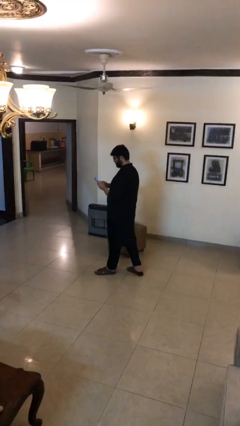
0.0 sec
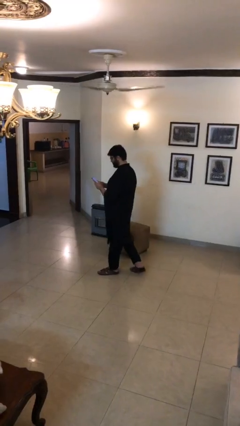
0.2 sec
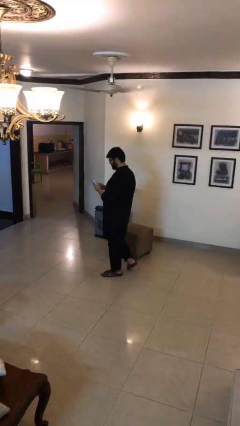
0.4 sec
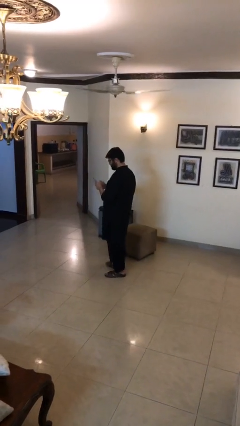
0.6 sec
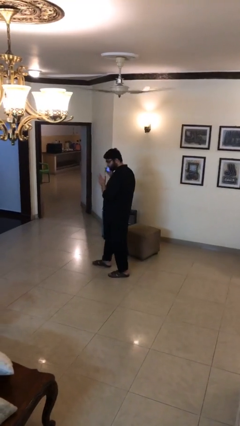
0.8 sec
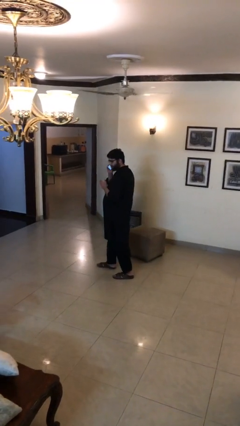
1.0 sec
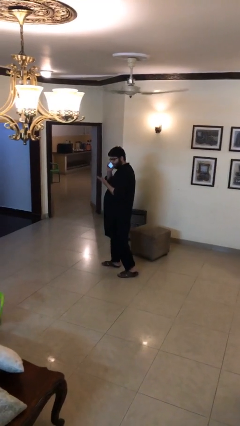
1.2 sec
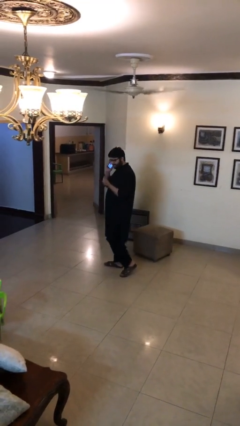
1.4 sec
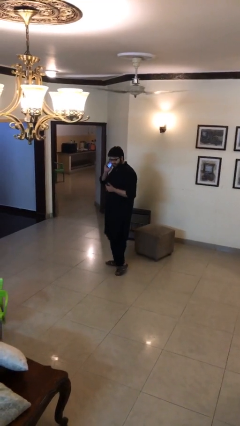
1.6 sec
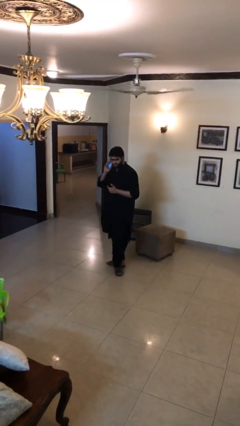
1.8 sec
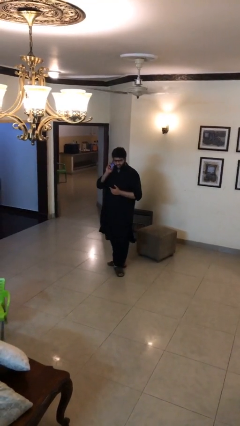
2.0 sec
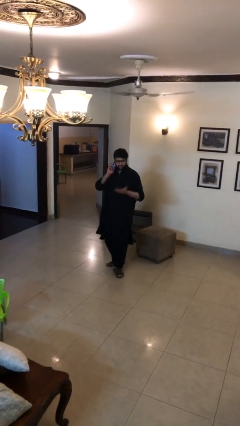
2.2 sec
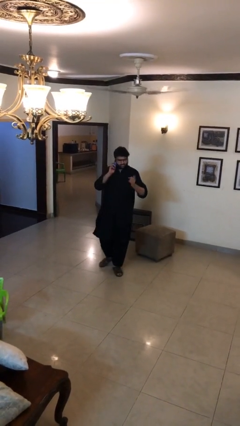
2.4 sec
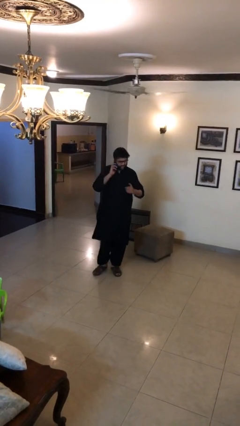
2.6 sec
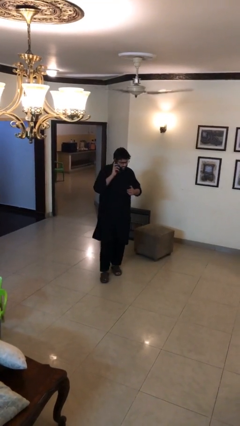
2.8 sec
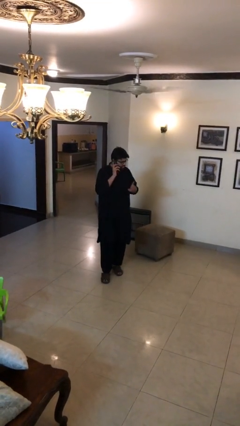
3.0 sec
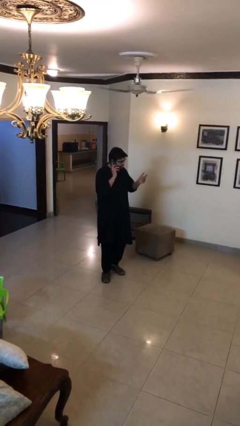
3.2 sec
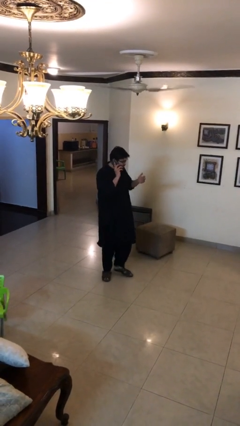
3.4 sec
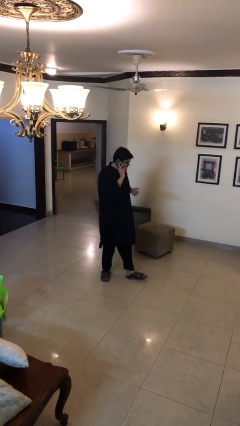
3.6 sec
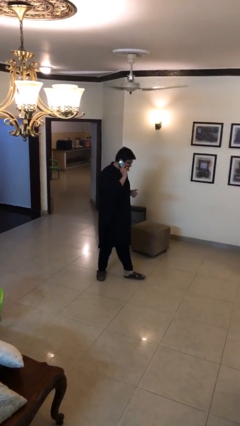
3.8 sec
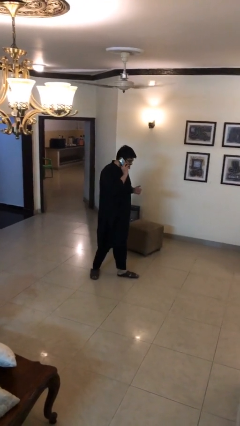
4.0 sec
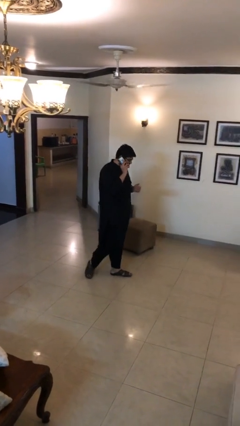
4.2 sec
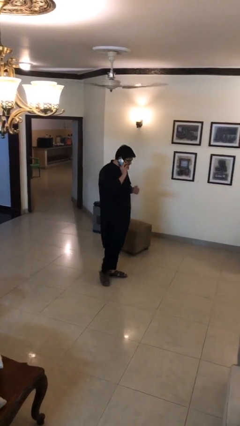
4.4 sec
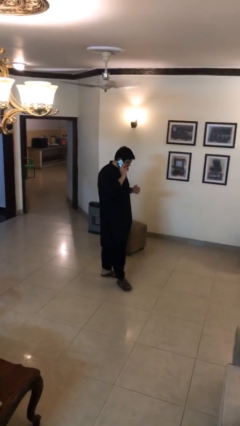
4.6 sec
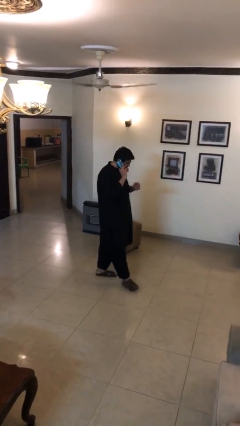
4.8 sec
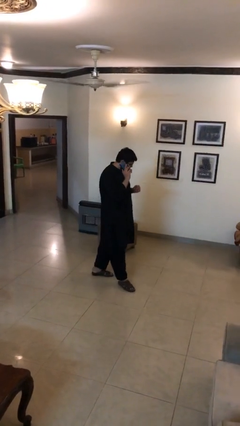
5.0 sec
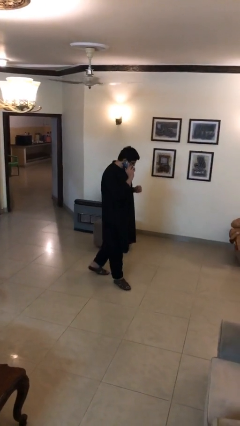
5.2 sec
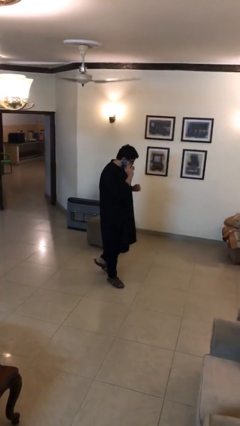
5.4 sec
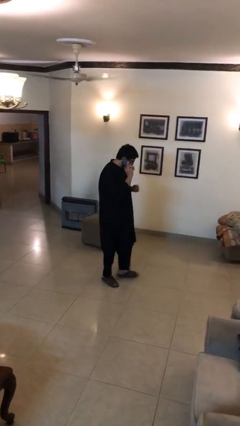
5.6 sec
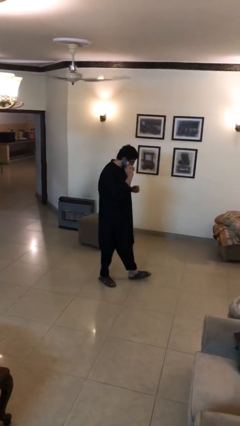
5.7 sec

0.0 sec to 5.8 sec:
person talks on phone

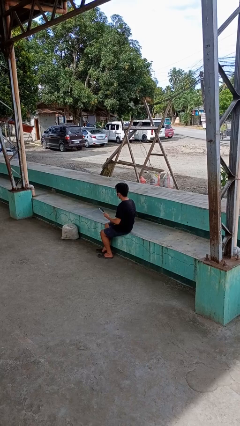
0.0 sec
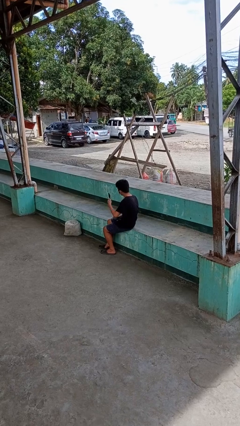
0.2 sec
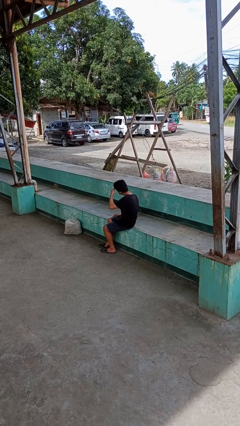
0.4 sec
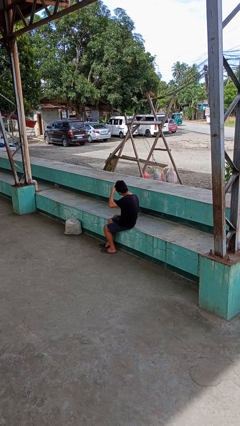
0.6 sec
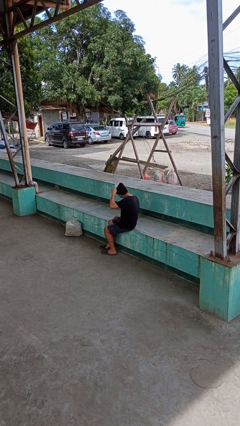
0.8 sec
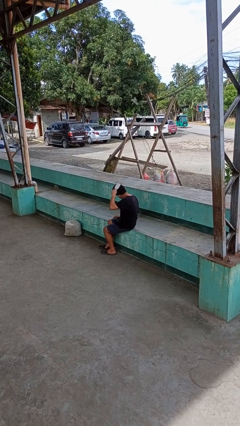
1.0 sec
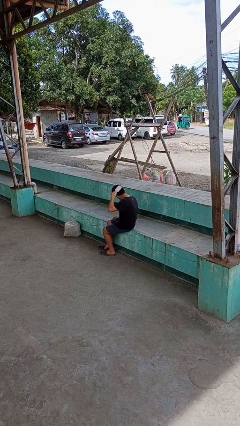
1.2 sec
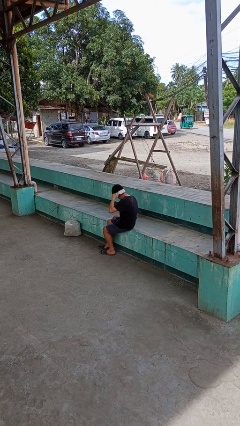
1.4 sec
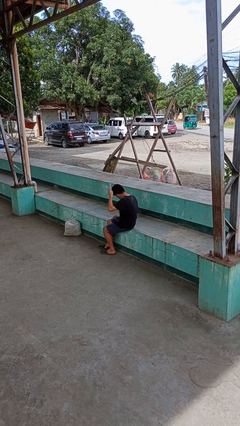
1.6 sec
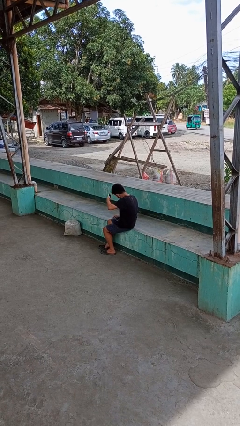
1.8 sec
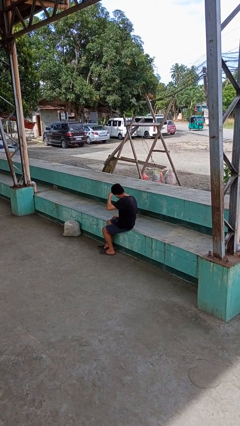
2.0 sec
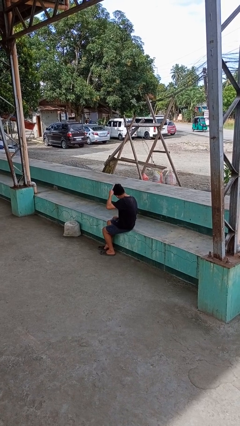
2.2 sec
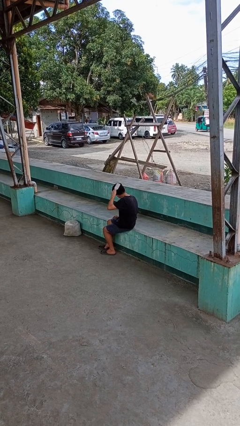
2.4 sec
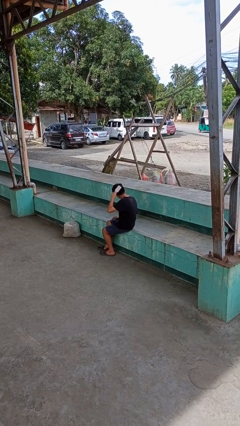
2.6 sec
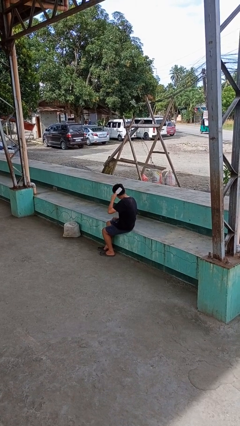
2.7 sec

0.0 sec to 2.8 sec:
person brushes hair

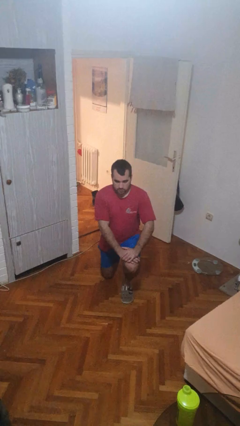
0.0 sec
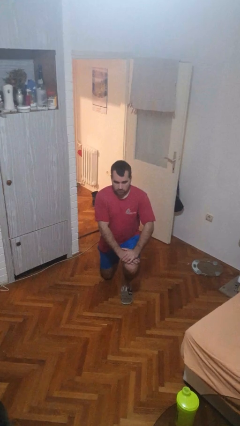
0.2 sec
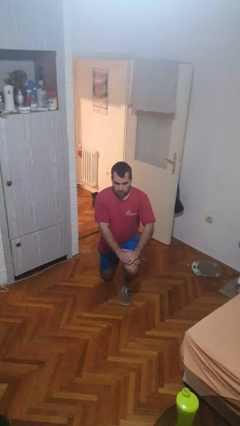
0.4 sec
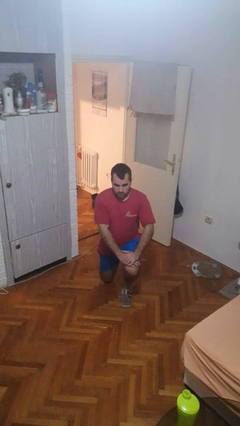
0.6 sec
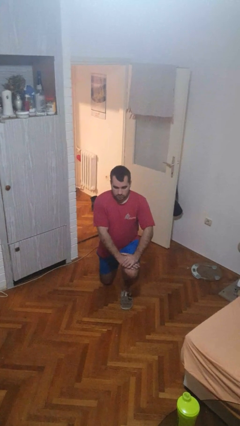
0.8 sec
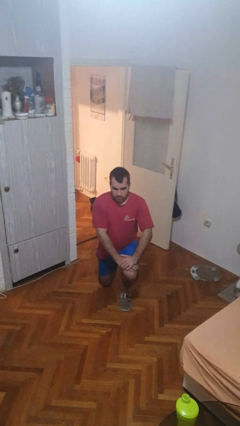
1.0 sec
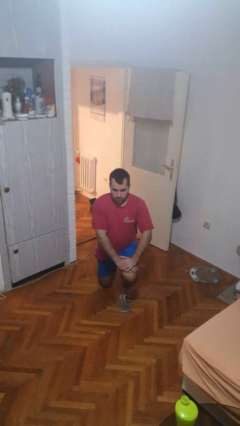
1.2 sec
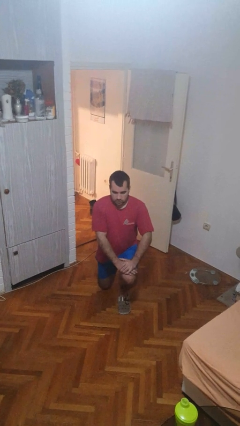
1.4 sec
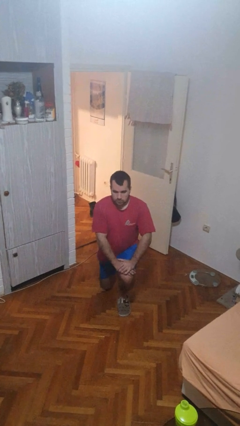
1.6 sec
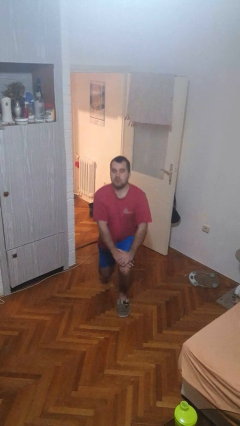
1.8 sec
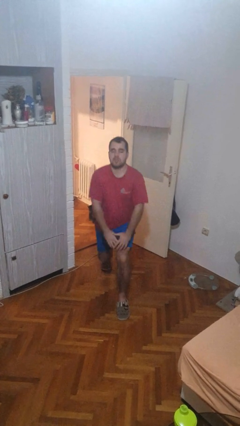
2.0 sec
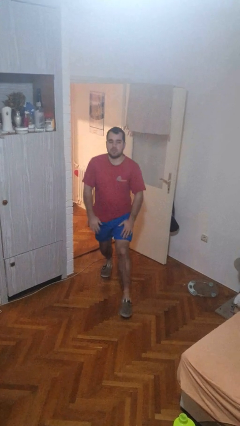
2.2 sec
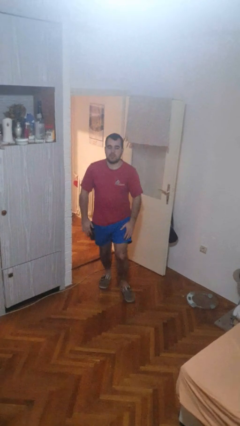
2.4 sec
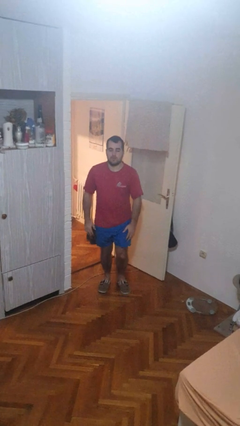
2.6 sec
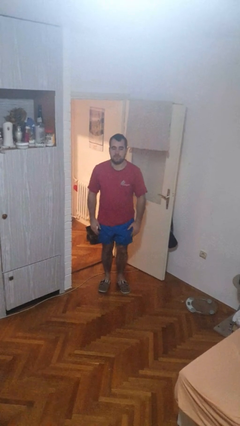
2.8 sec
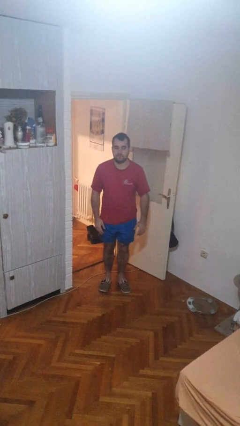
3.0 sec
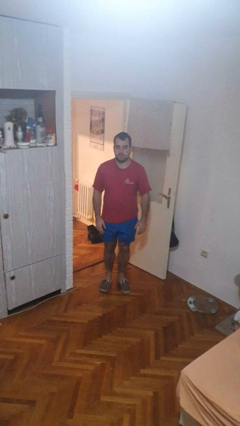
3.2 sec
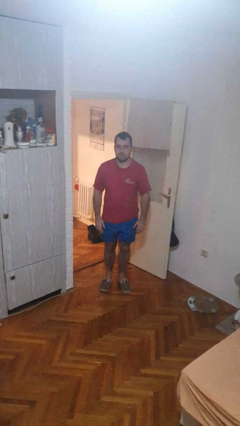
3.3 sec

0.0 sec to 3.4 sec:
person stands up from floor

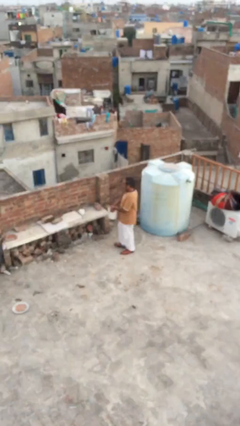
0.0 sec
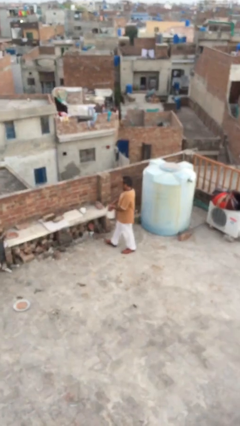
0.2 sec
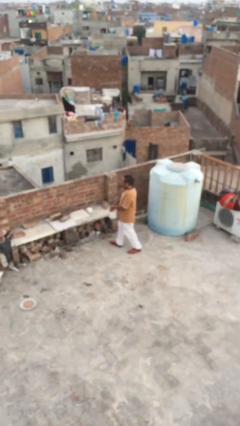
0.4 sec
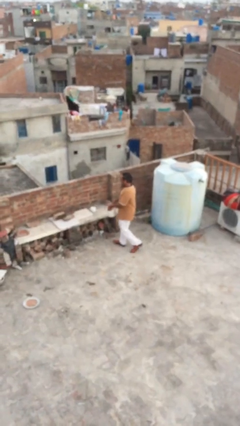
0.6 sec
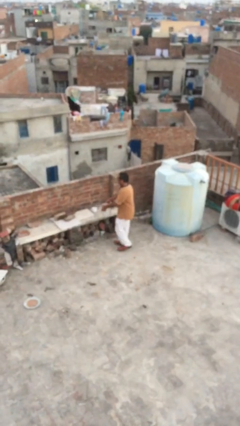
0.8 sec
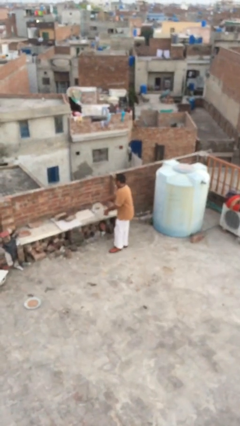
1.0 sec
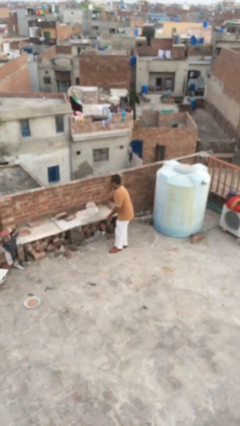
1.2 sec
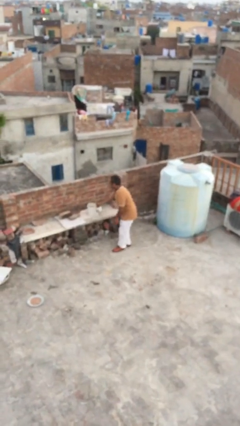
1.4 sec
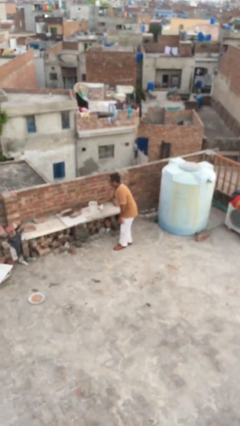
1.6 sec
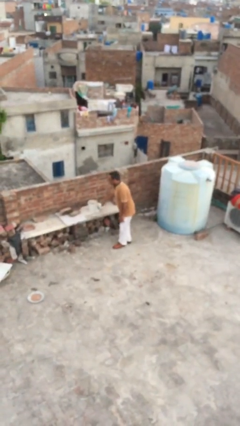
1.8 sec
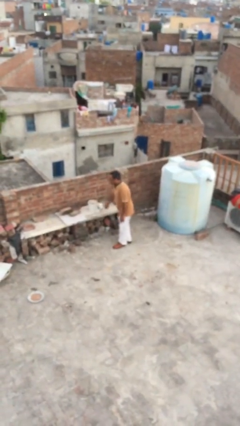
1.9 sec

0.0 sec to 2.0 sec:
person puts down object on table

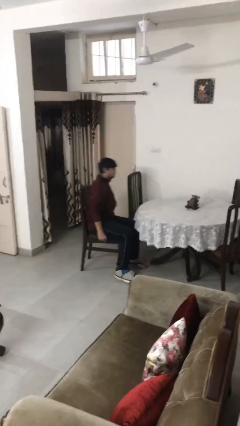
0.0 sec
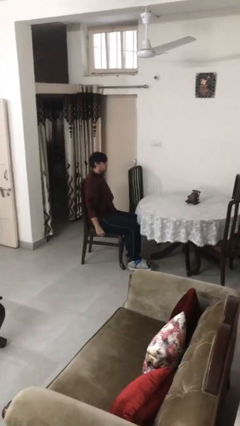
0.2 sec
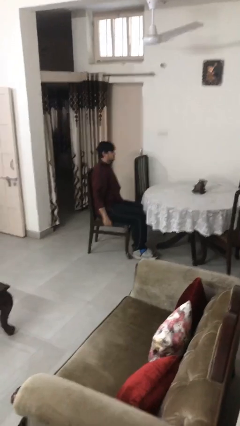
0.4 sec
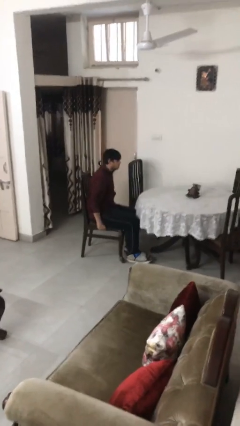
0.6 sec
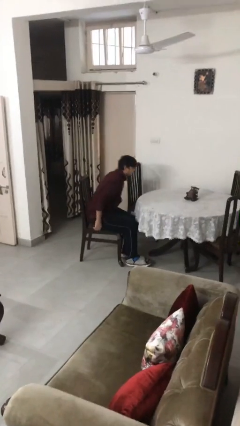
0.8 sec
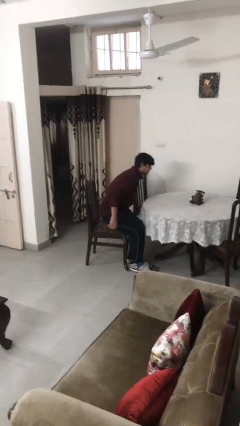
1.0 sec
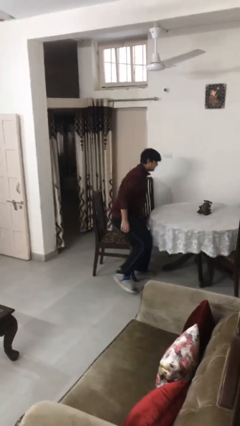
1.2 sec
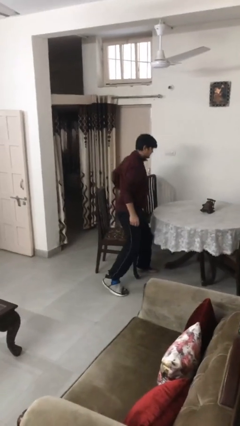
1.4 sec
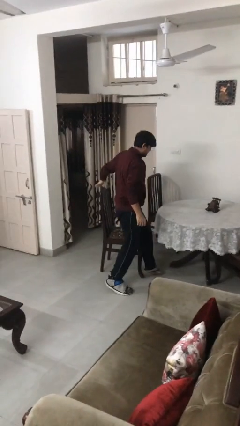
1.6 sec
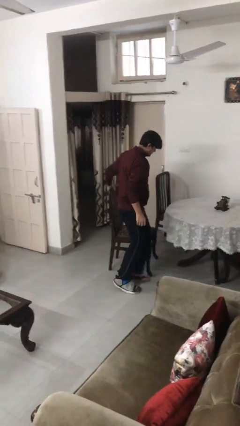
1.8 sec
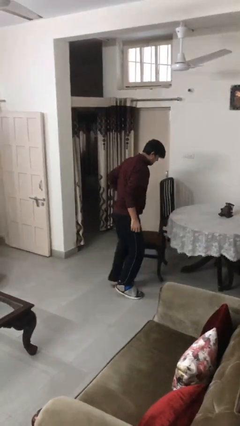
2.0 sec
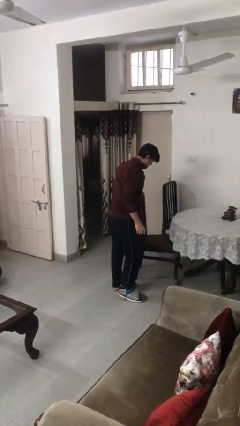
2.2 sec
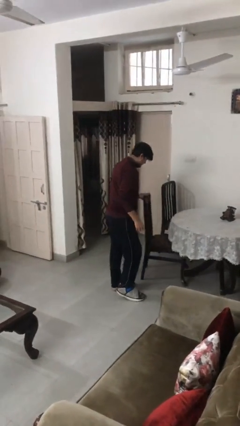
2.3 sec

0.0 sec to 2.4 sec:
person stands up

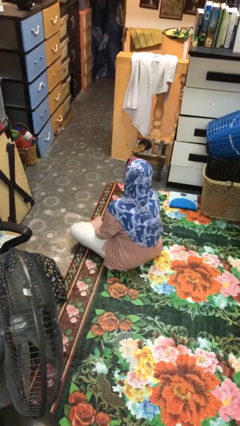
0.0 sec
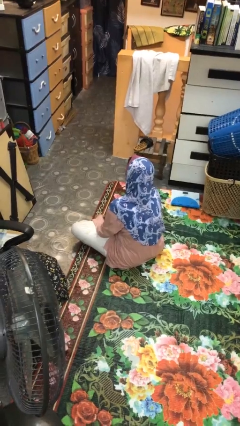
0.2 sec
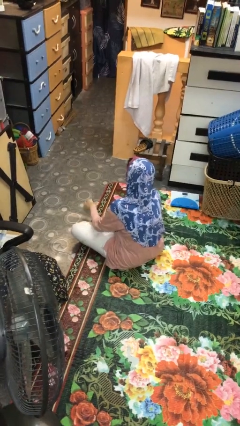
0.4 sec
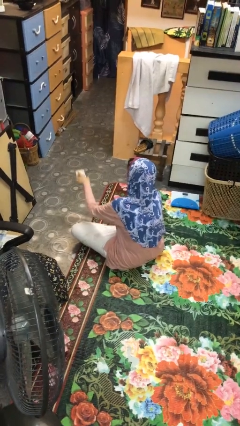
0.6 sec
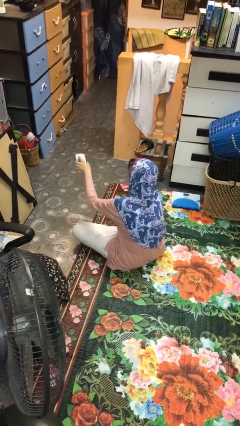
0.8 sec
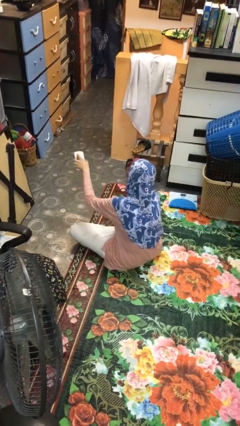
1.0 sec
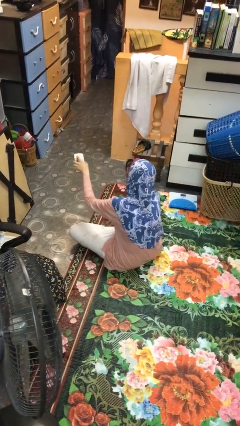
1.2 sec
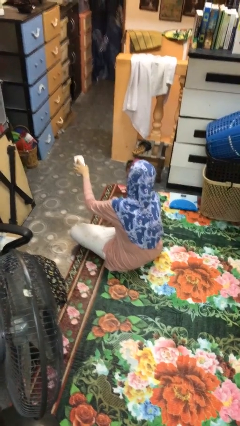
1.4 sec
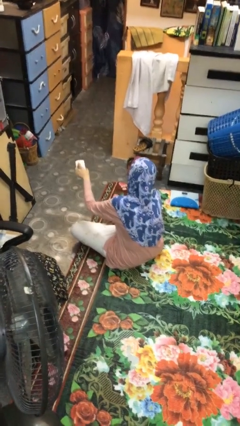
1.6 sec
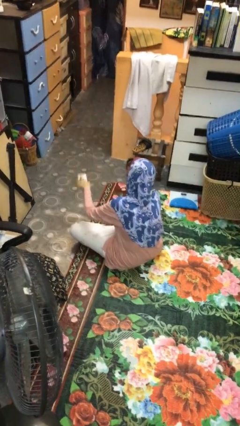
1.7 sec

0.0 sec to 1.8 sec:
person uses television remote
